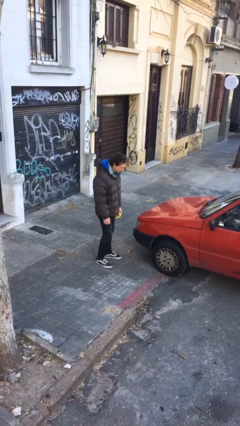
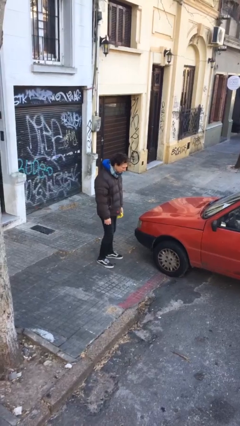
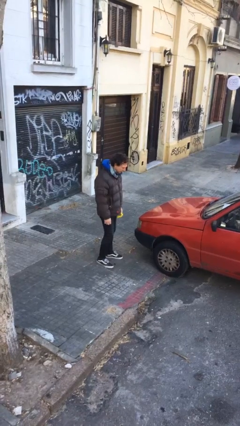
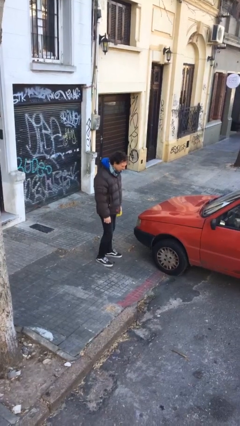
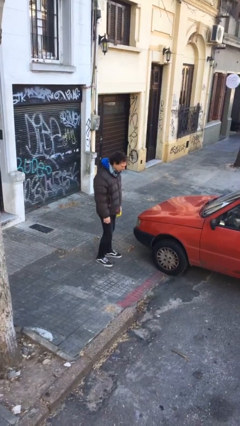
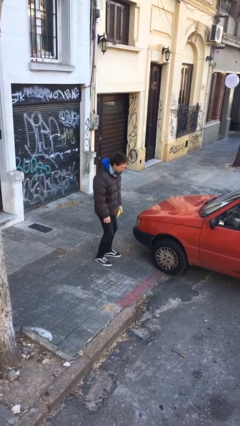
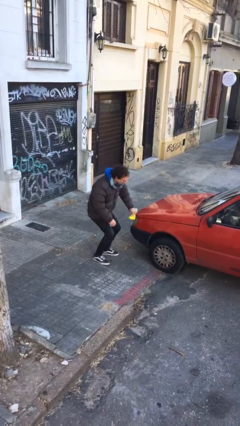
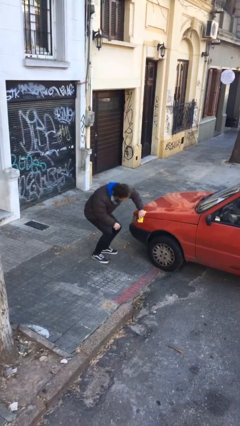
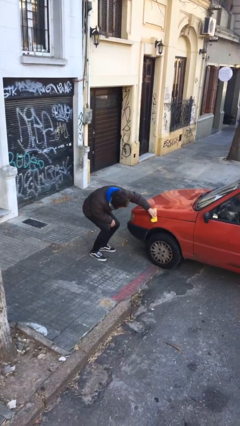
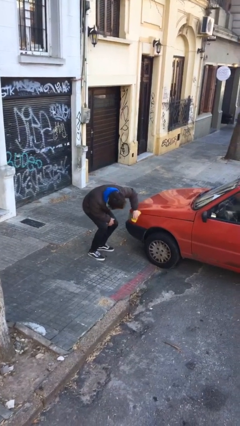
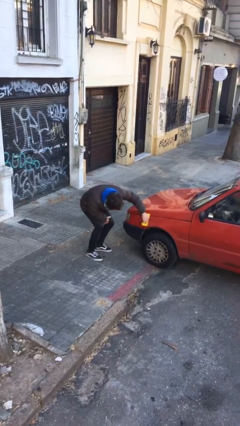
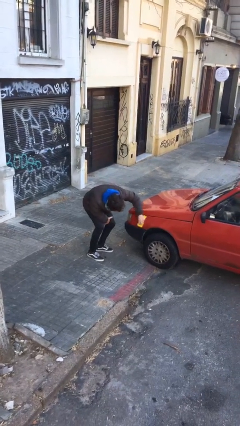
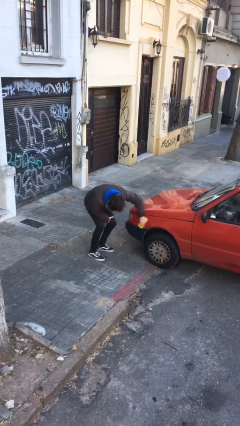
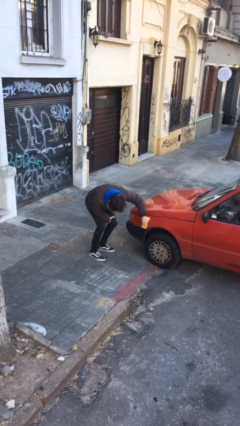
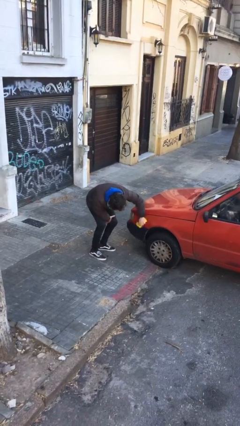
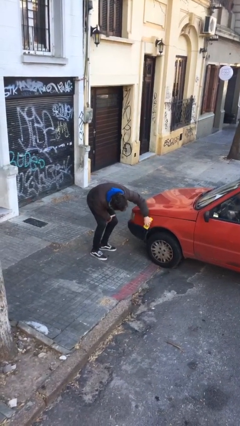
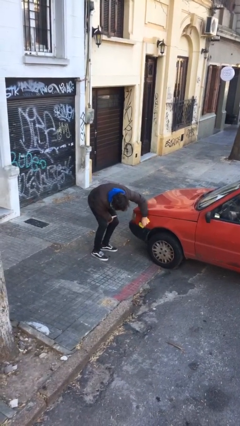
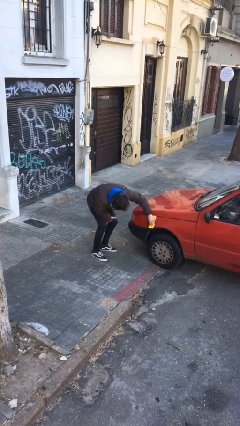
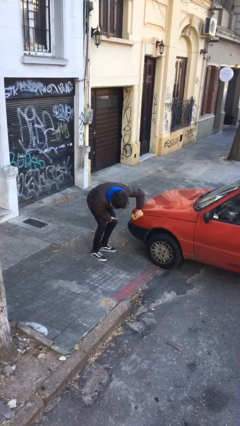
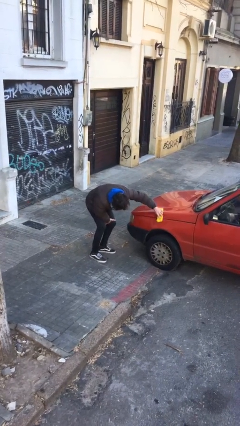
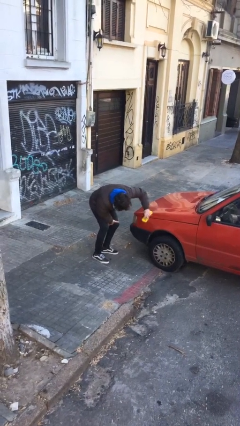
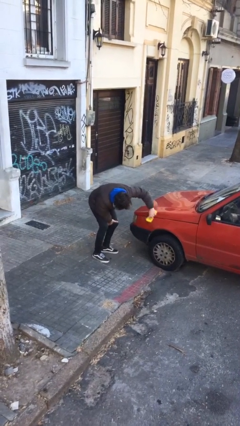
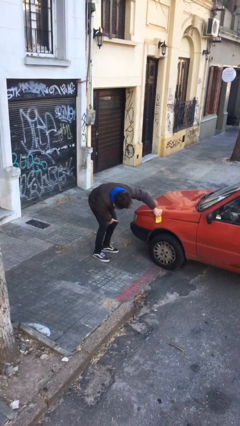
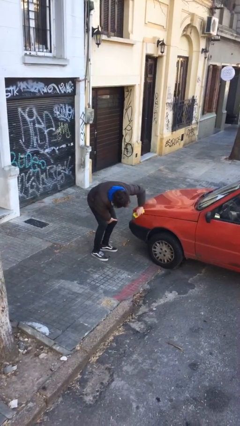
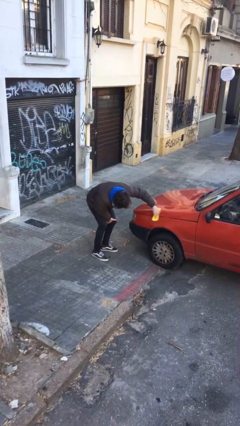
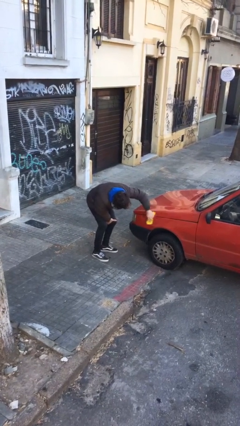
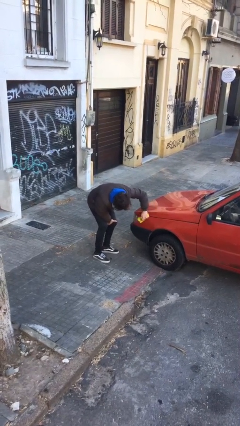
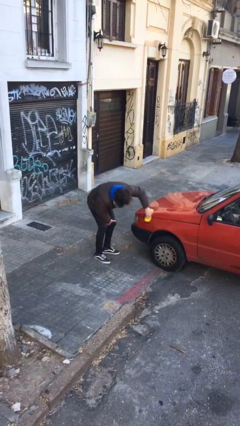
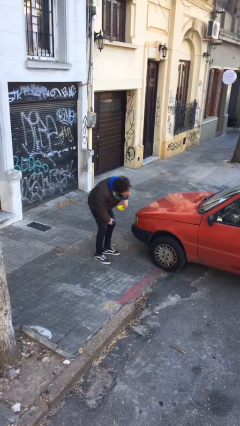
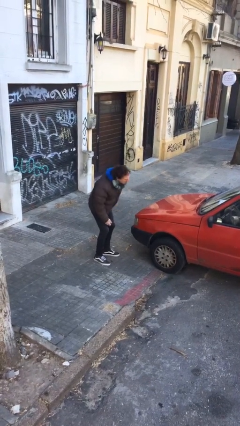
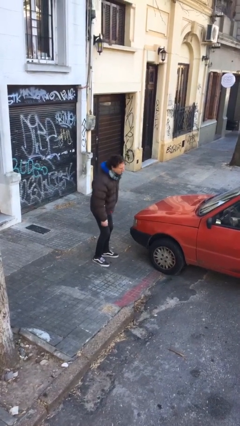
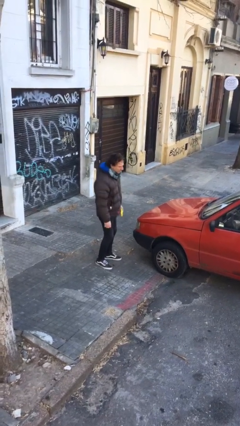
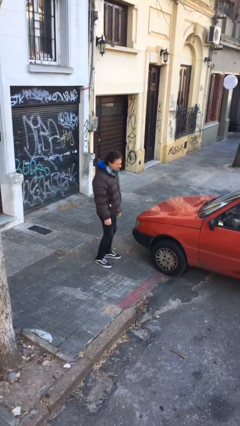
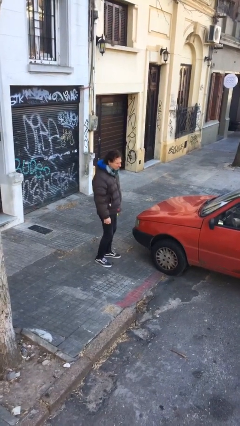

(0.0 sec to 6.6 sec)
person polishes car with rag

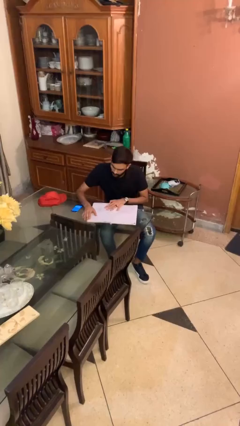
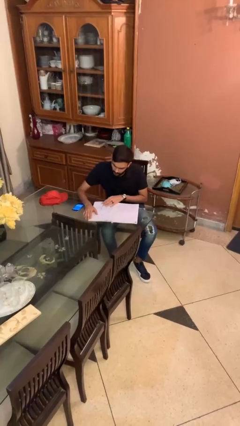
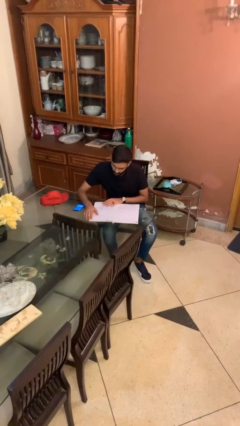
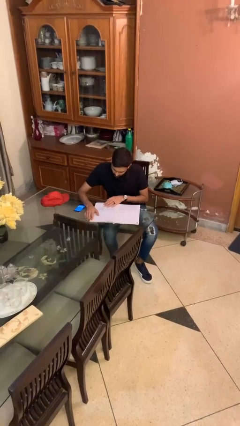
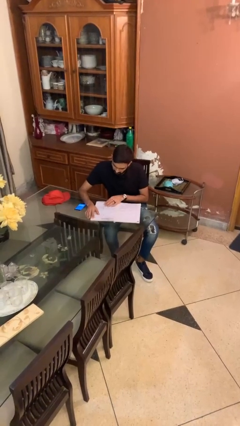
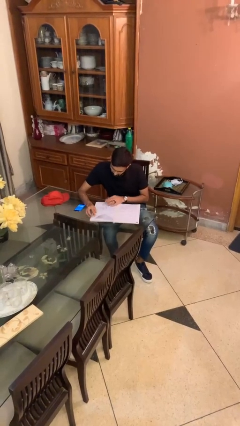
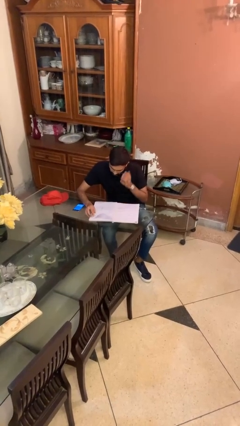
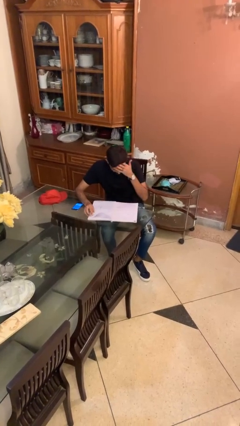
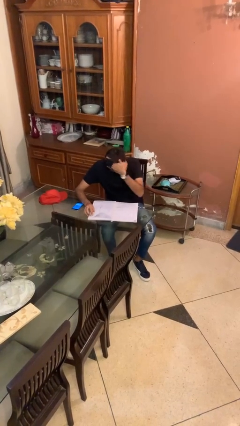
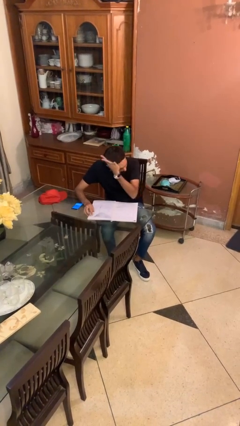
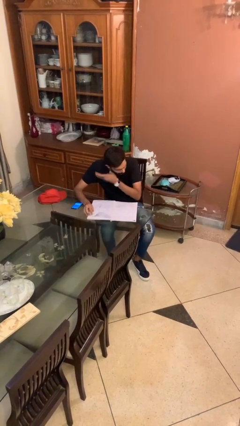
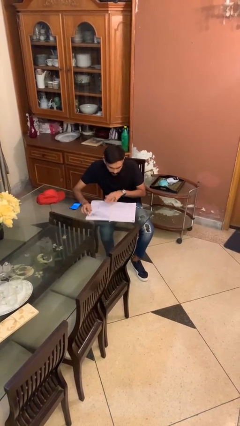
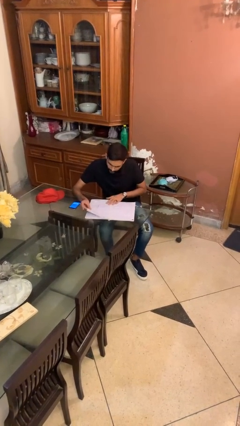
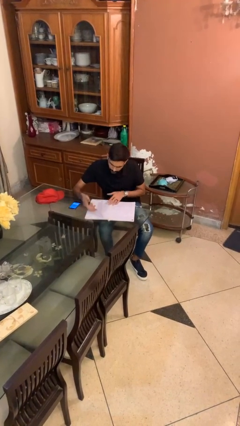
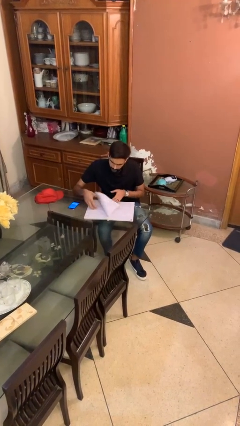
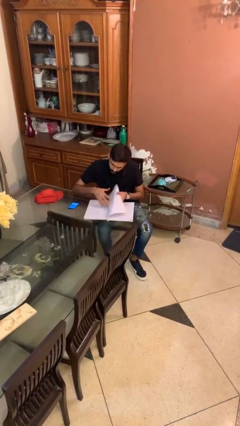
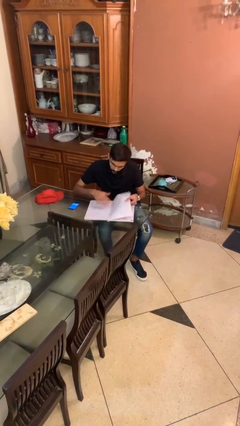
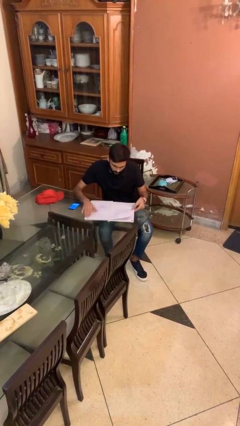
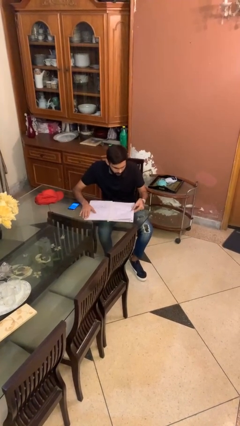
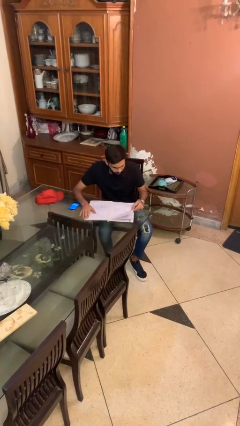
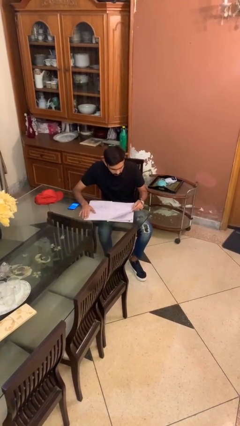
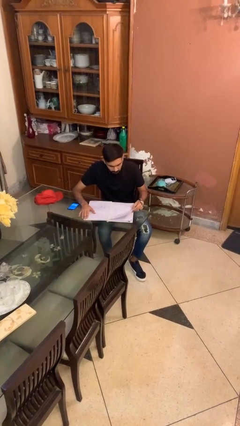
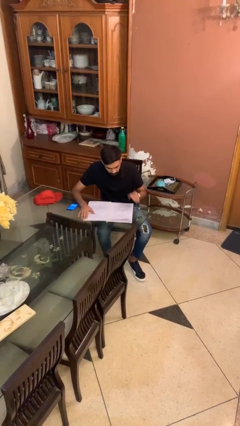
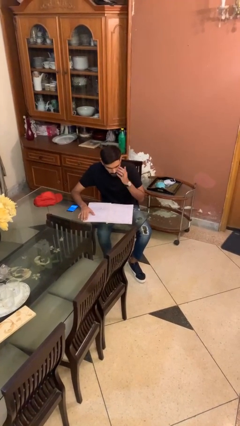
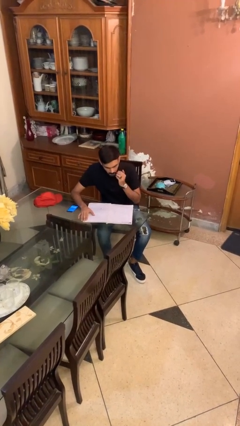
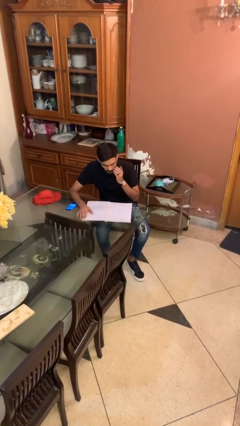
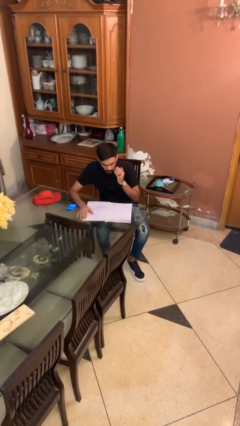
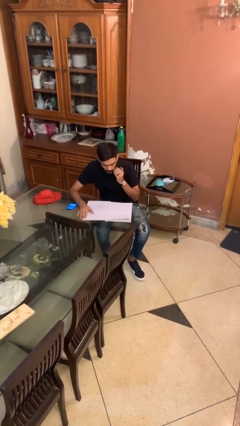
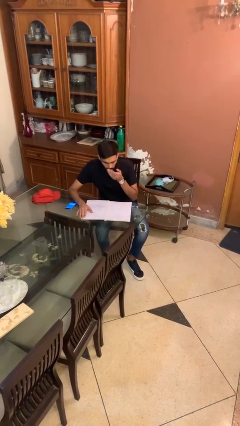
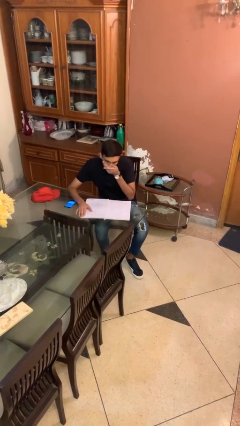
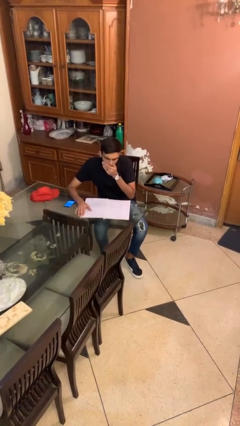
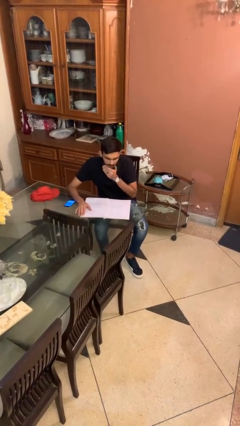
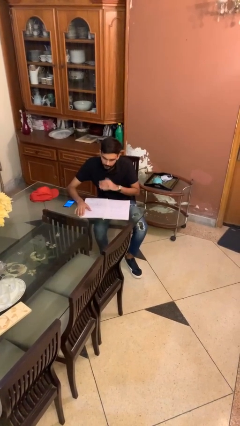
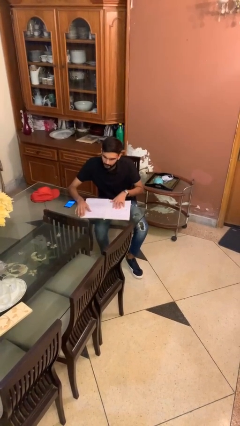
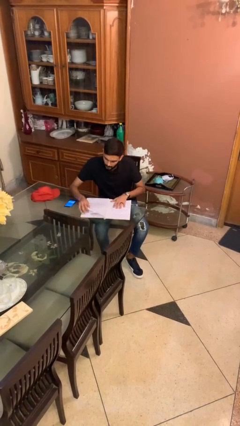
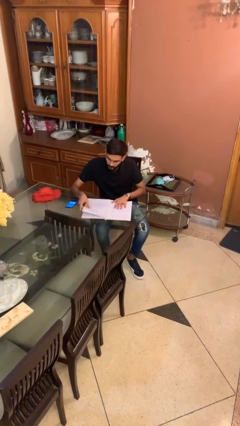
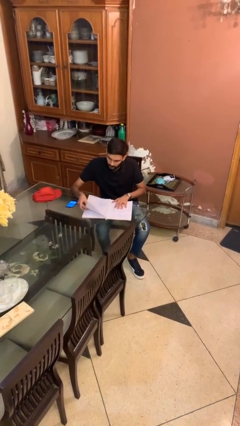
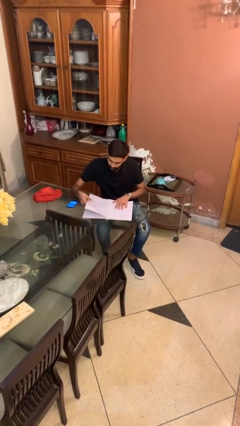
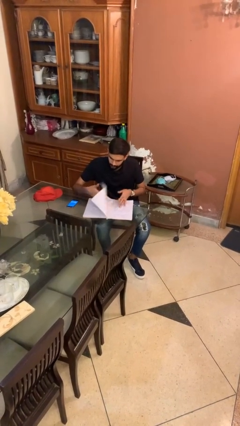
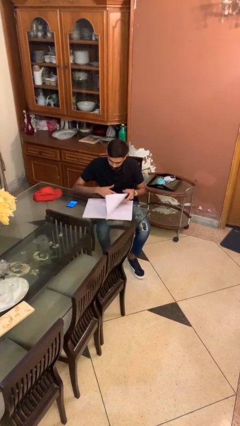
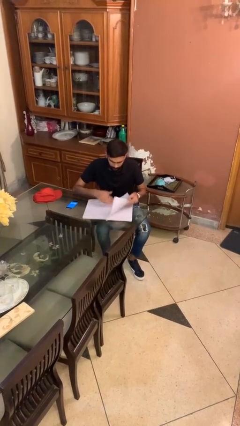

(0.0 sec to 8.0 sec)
person reads document

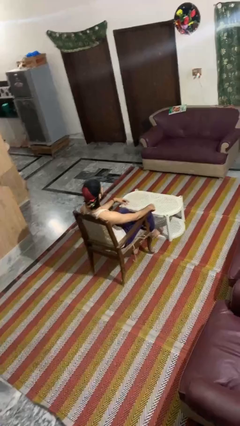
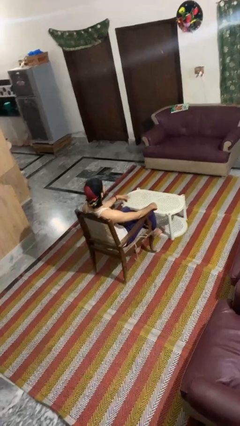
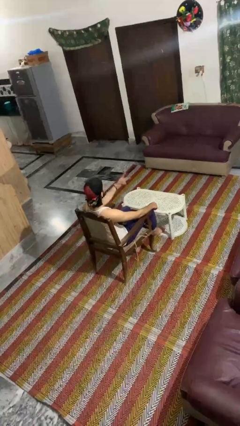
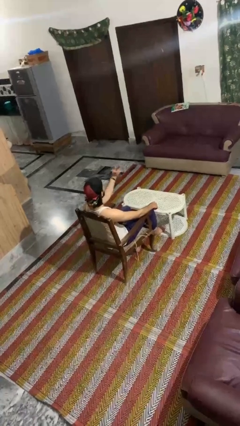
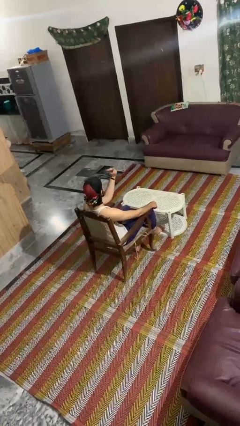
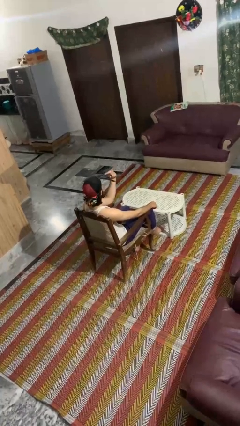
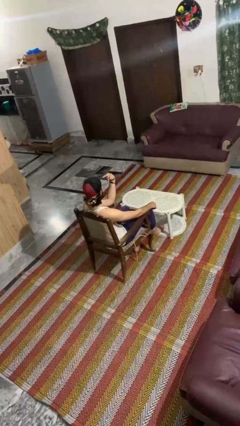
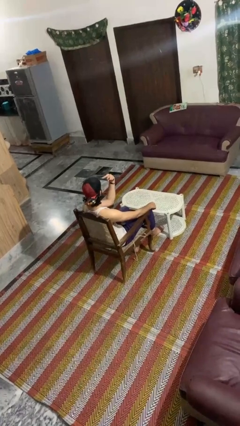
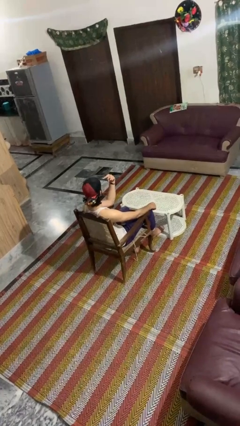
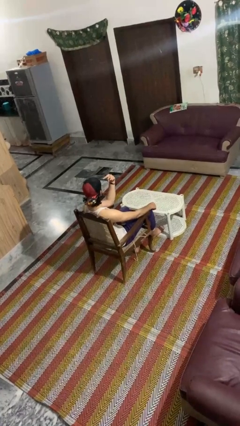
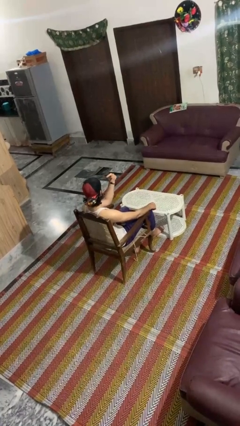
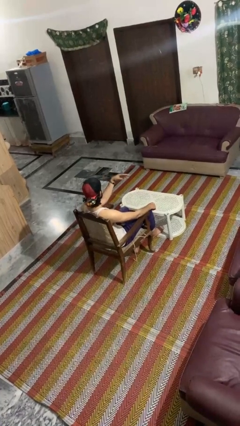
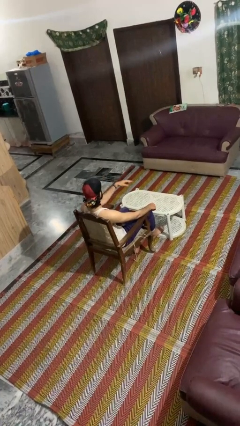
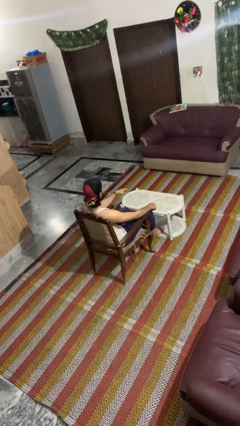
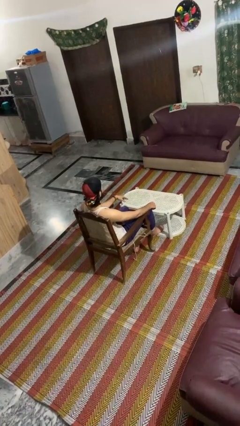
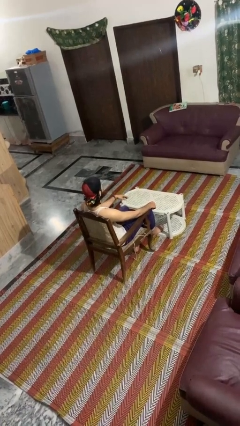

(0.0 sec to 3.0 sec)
person gestures watch closely

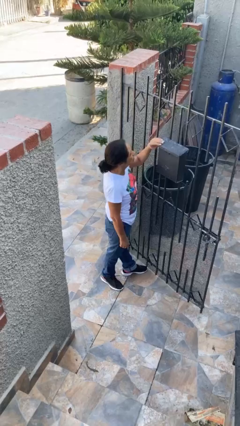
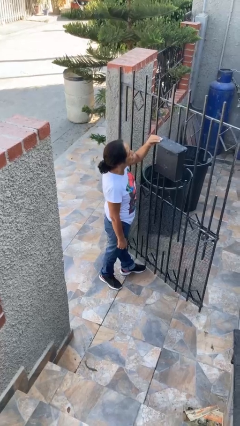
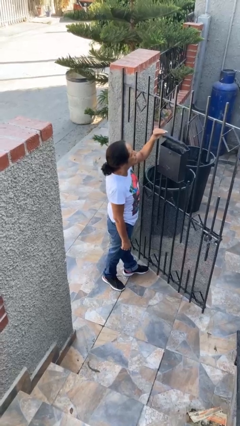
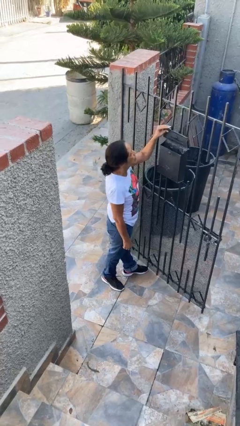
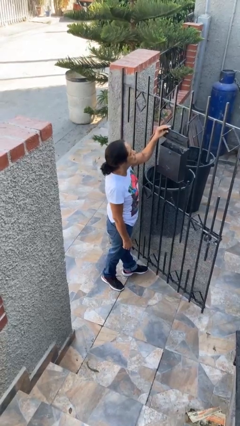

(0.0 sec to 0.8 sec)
person opens mailbox
